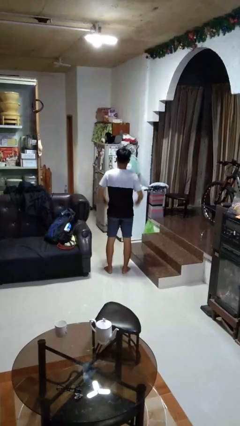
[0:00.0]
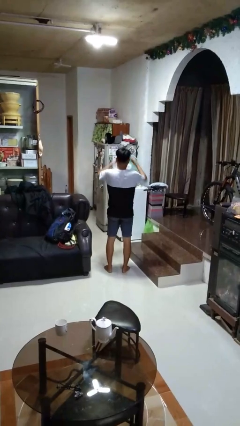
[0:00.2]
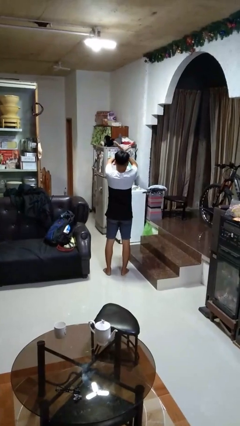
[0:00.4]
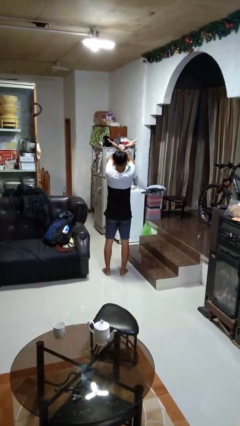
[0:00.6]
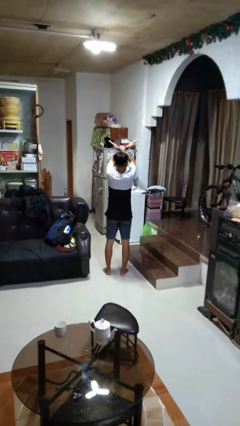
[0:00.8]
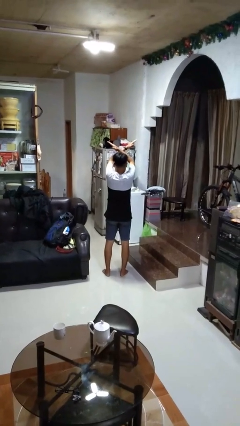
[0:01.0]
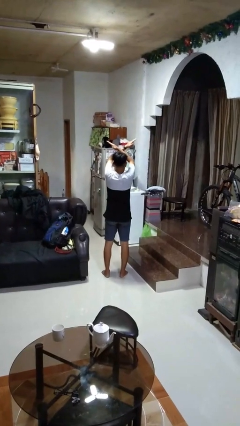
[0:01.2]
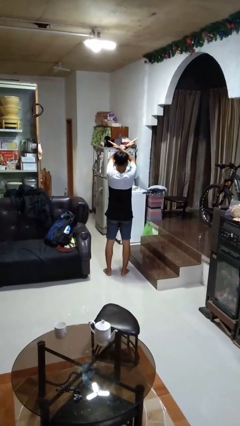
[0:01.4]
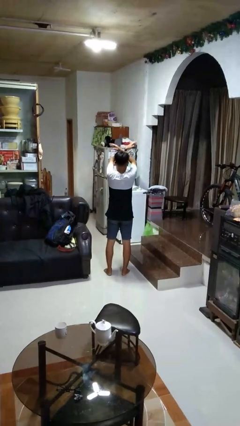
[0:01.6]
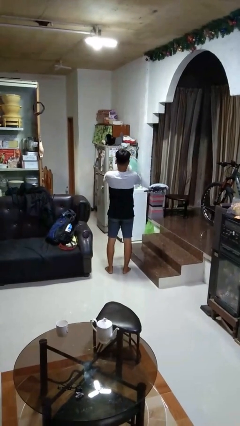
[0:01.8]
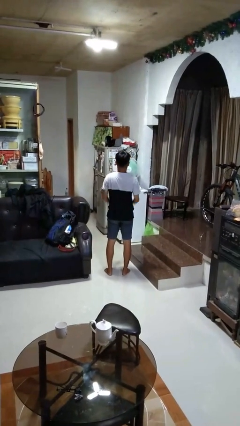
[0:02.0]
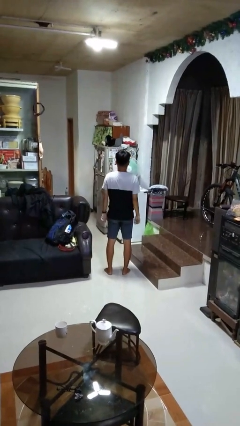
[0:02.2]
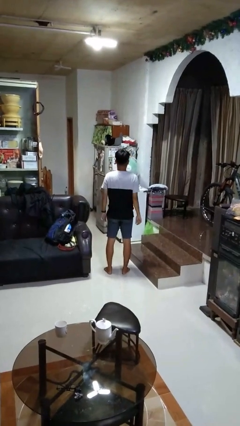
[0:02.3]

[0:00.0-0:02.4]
person gestures arms x

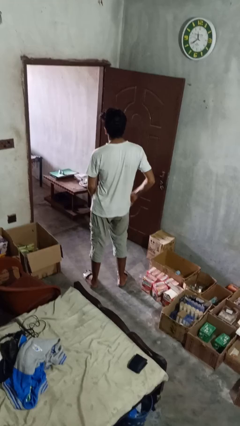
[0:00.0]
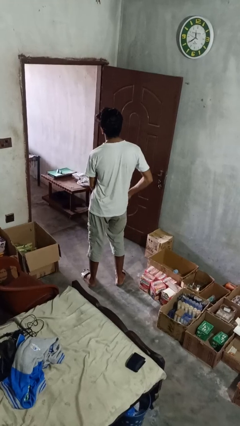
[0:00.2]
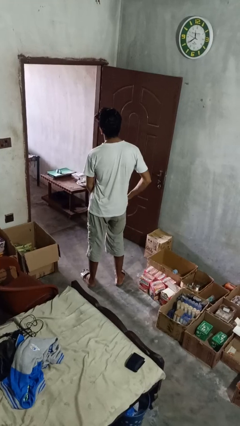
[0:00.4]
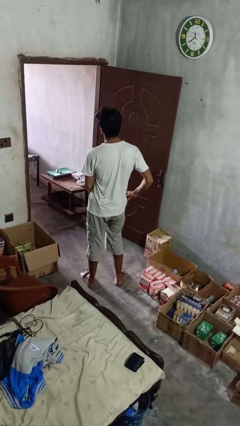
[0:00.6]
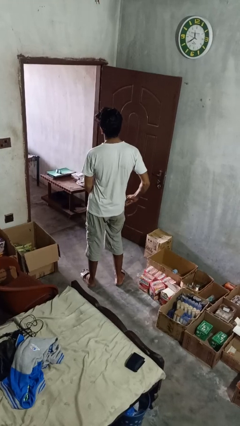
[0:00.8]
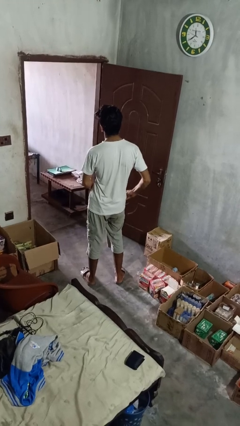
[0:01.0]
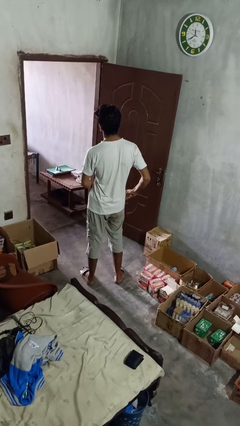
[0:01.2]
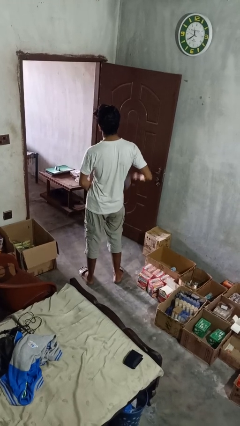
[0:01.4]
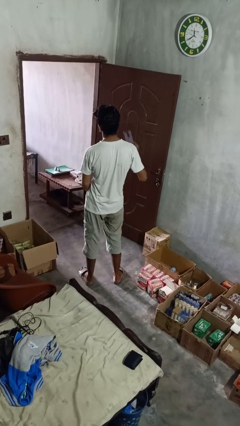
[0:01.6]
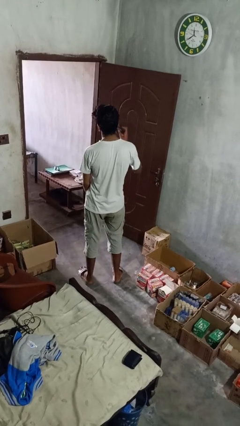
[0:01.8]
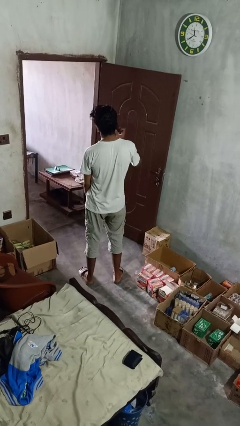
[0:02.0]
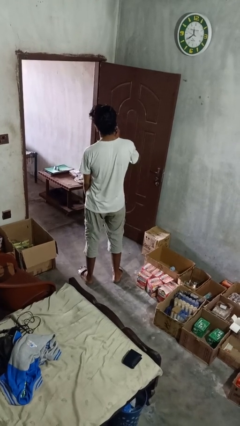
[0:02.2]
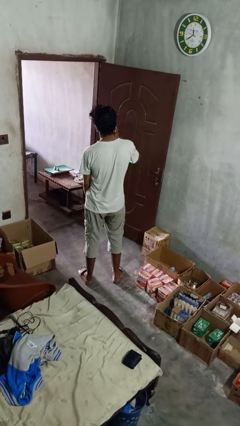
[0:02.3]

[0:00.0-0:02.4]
person takes phone from pocket

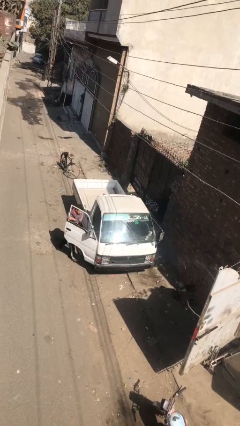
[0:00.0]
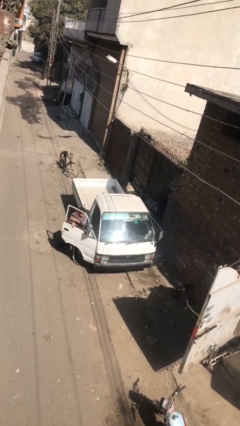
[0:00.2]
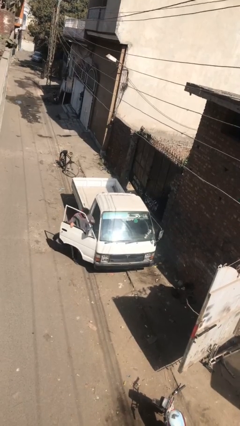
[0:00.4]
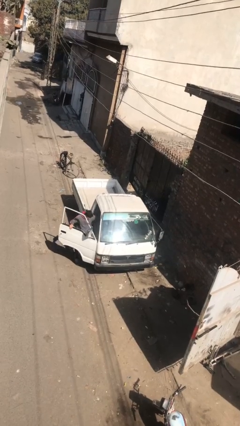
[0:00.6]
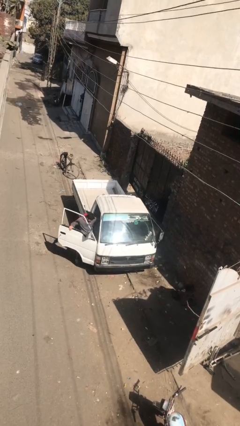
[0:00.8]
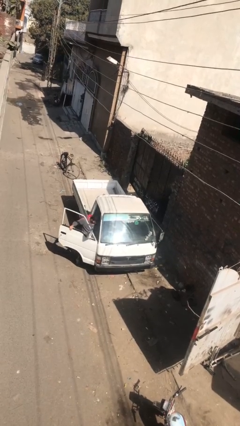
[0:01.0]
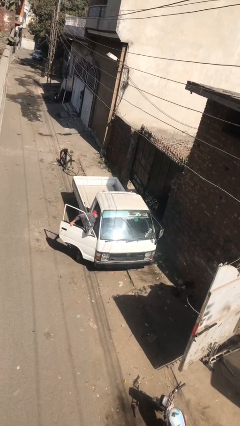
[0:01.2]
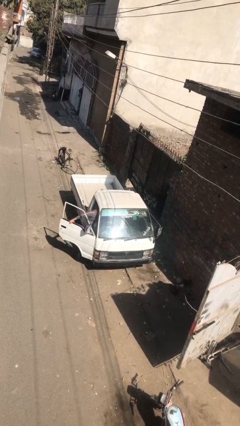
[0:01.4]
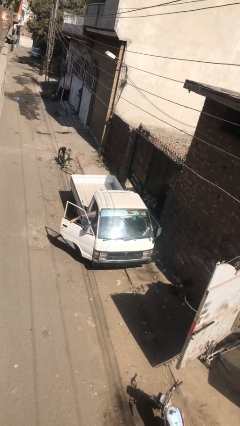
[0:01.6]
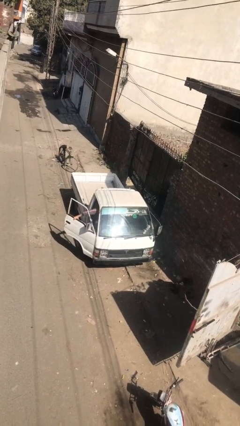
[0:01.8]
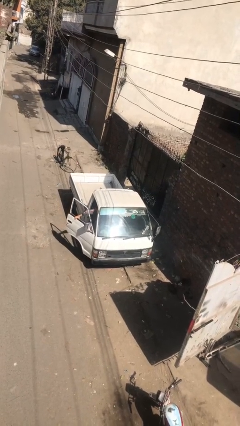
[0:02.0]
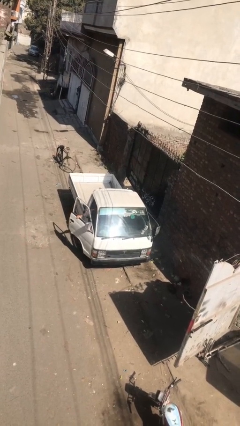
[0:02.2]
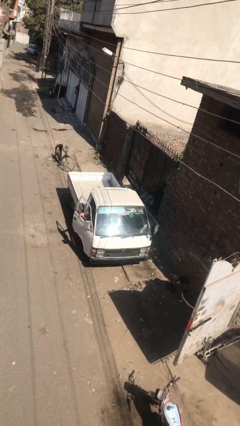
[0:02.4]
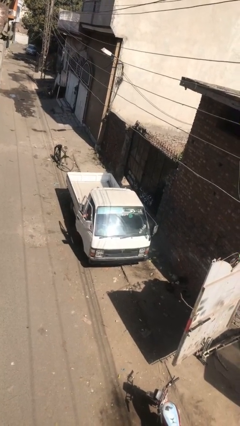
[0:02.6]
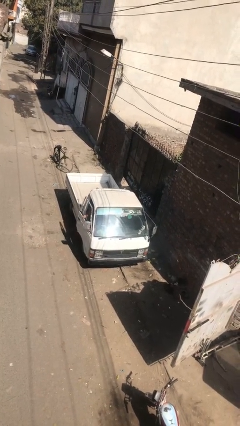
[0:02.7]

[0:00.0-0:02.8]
car picks up person

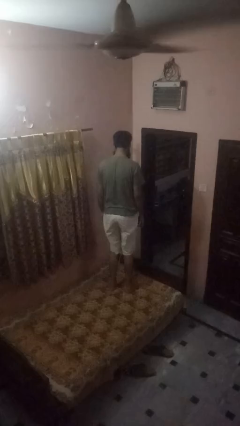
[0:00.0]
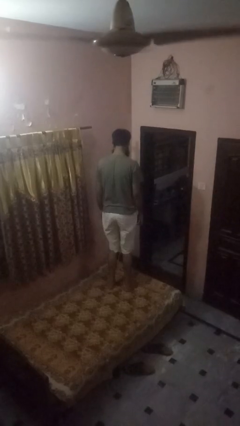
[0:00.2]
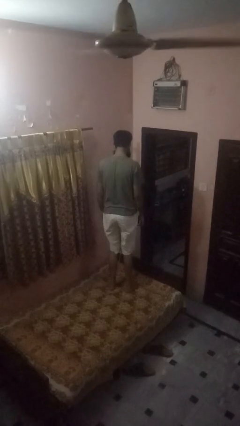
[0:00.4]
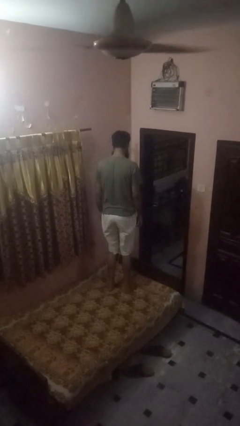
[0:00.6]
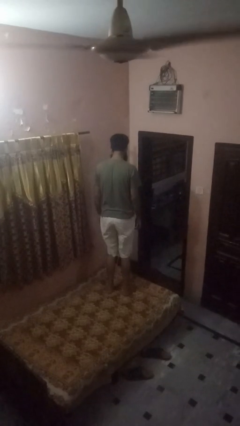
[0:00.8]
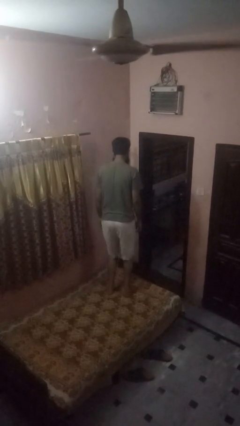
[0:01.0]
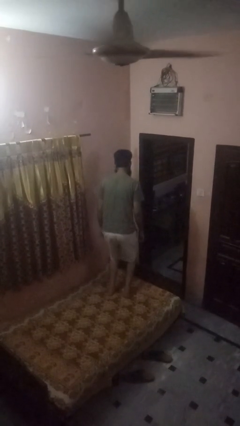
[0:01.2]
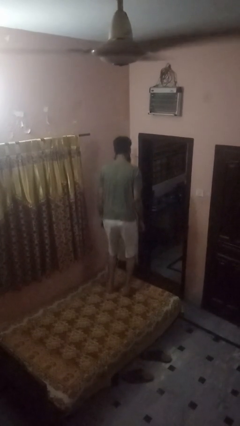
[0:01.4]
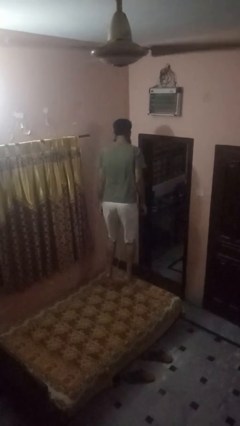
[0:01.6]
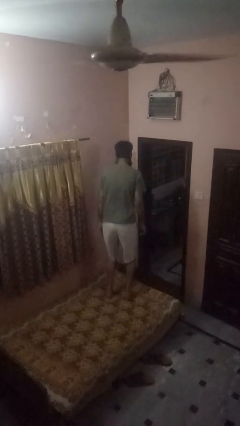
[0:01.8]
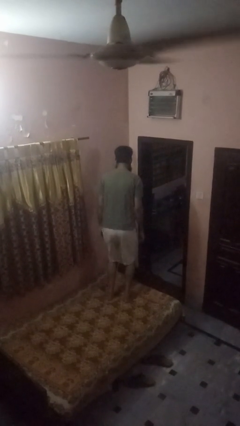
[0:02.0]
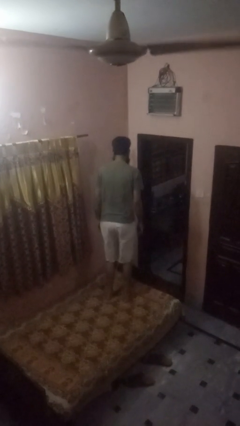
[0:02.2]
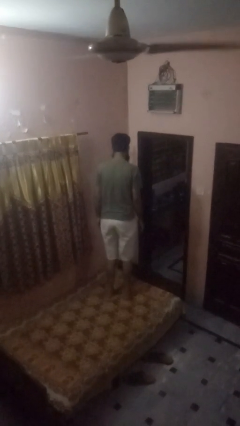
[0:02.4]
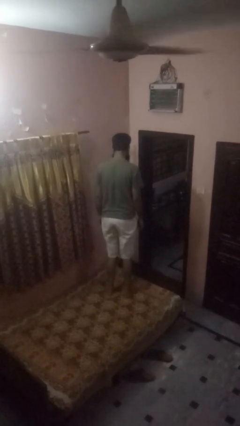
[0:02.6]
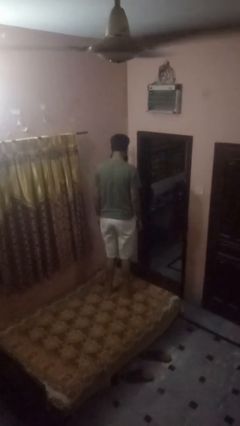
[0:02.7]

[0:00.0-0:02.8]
person jumps on bed

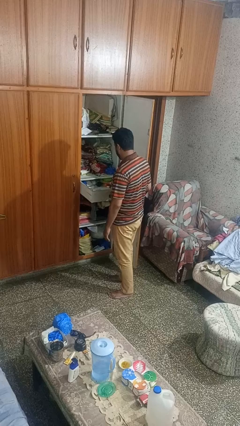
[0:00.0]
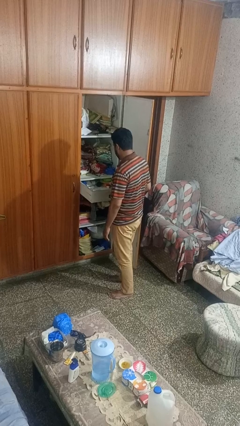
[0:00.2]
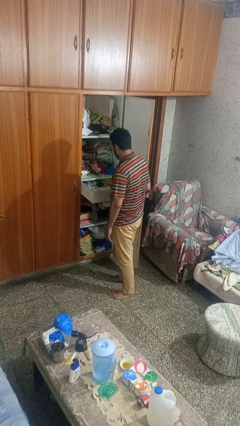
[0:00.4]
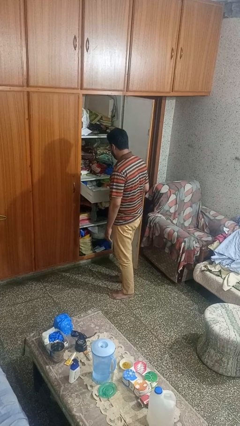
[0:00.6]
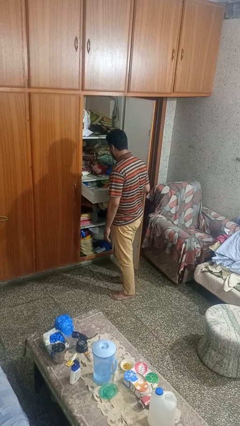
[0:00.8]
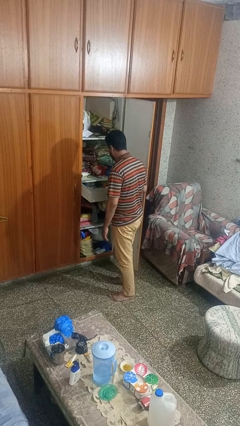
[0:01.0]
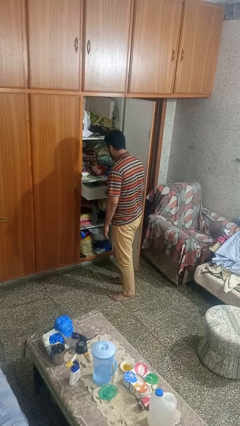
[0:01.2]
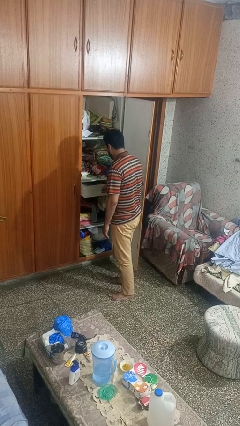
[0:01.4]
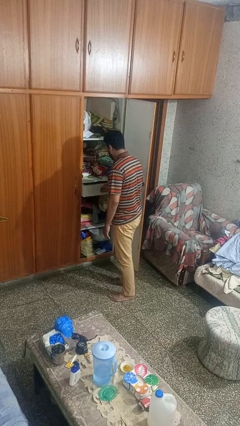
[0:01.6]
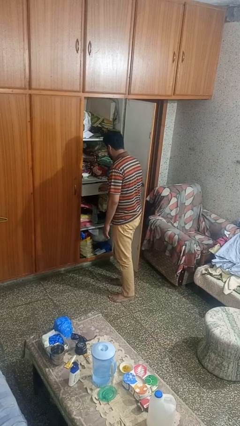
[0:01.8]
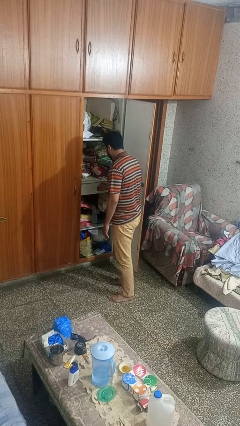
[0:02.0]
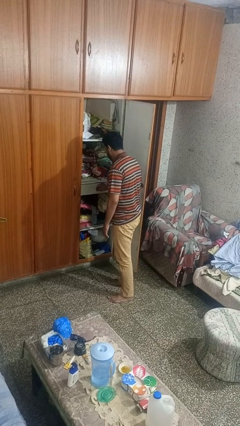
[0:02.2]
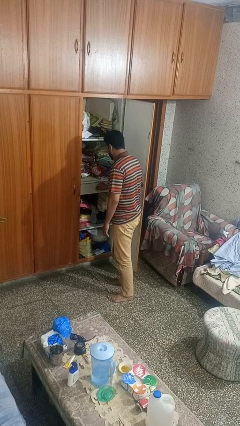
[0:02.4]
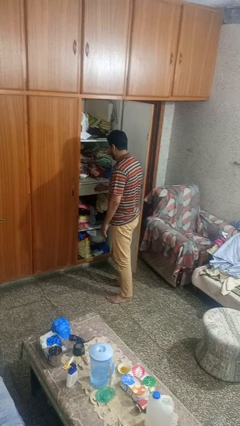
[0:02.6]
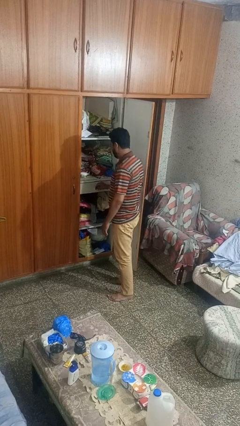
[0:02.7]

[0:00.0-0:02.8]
person closes dresser drawer

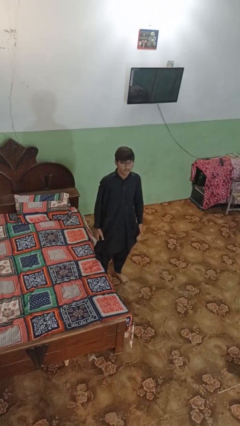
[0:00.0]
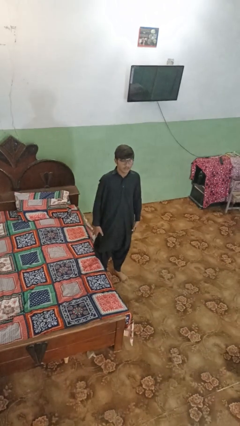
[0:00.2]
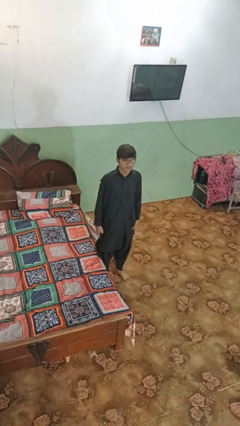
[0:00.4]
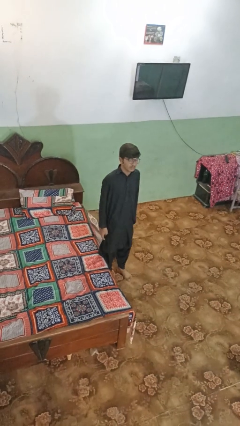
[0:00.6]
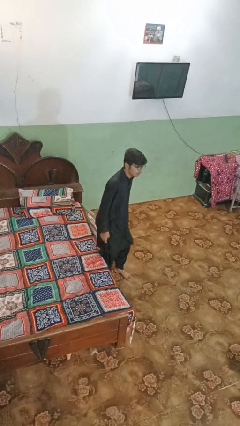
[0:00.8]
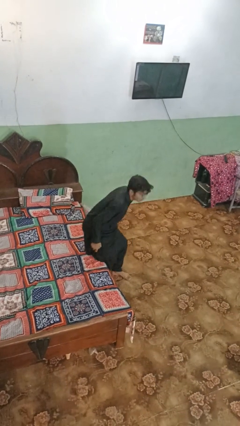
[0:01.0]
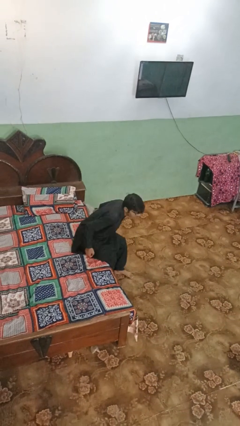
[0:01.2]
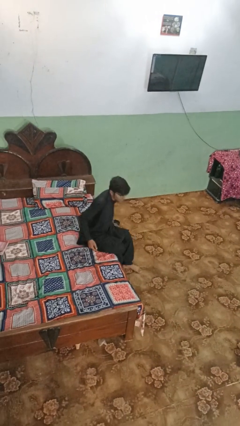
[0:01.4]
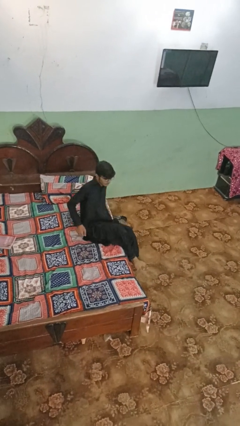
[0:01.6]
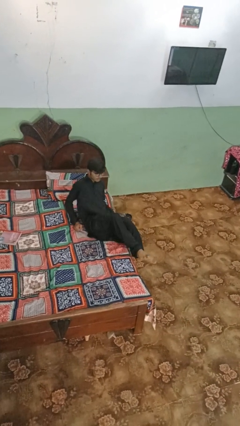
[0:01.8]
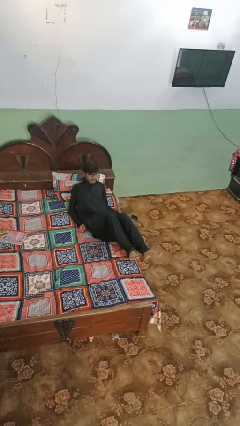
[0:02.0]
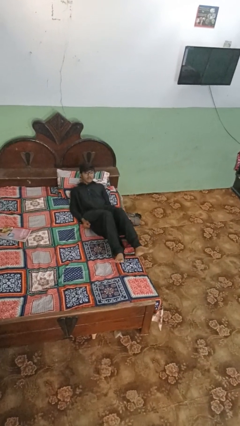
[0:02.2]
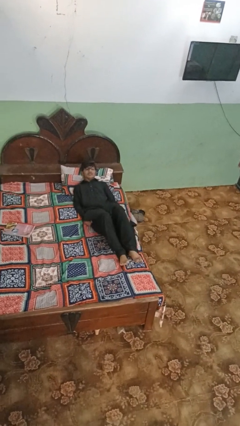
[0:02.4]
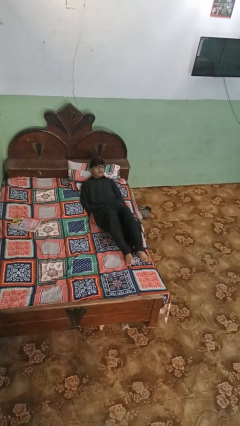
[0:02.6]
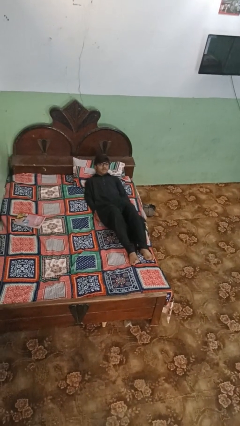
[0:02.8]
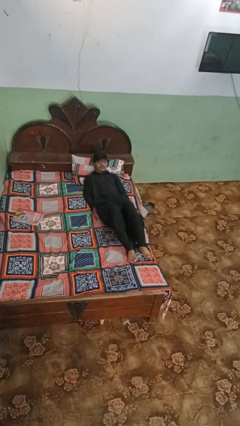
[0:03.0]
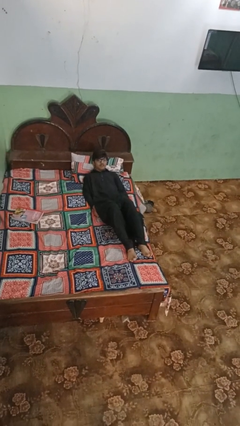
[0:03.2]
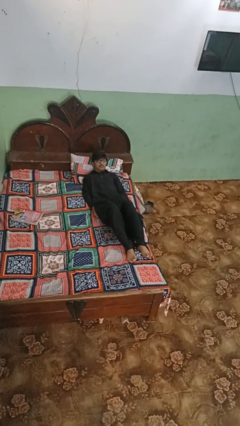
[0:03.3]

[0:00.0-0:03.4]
person lies down on bed

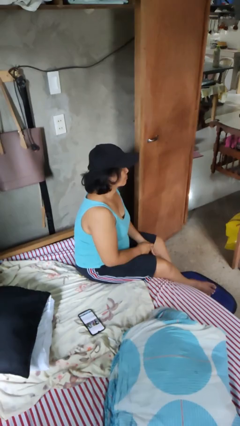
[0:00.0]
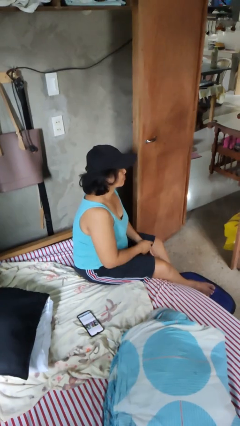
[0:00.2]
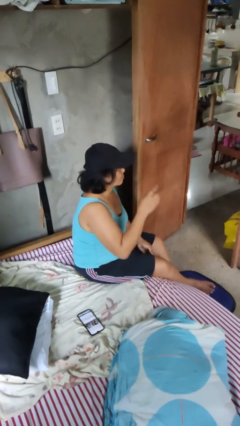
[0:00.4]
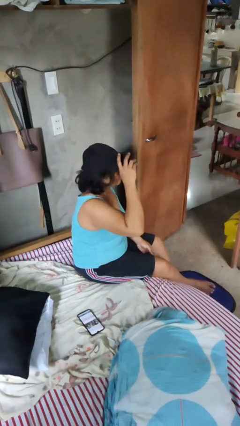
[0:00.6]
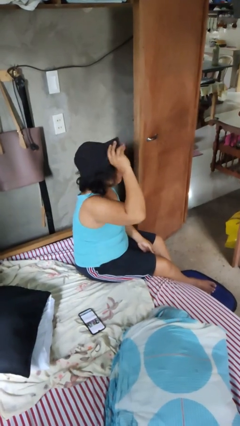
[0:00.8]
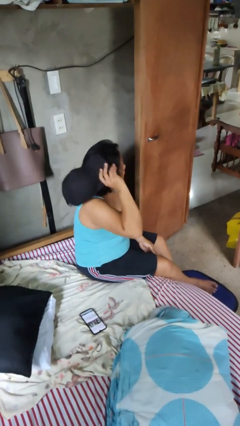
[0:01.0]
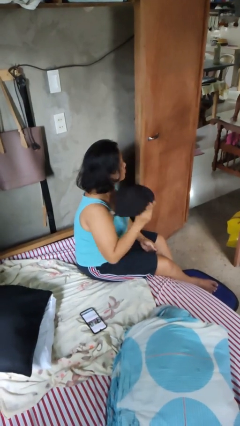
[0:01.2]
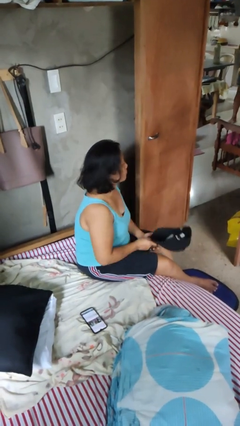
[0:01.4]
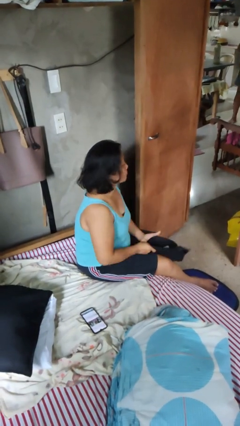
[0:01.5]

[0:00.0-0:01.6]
person takes off hat
